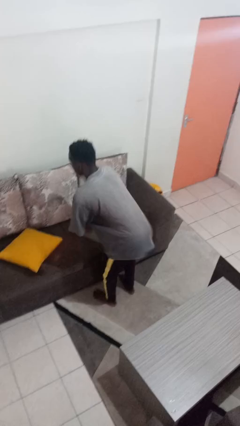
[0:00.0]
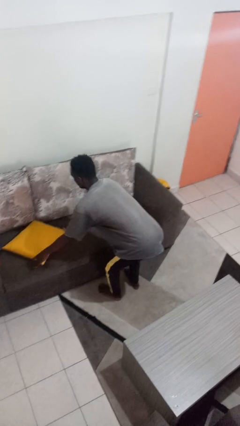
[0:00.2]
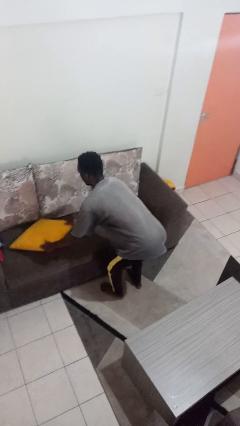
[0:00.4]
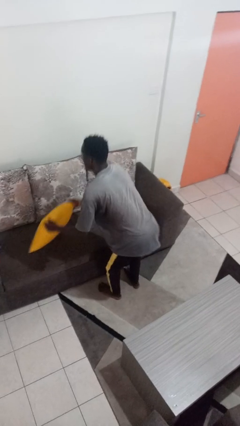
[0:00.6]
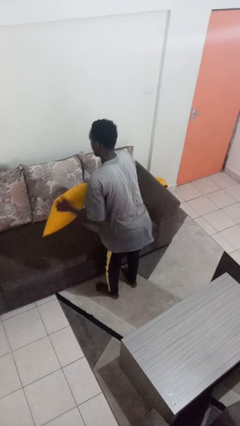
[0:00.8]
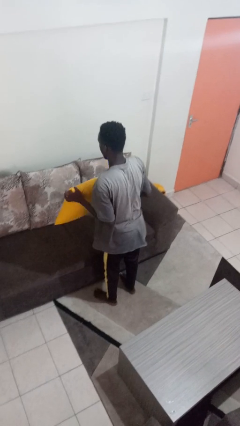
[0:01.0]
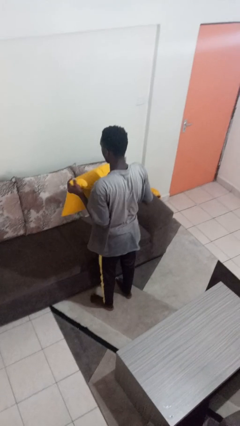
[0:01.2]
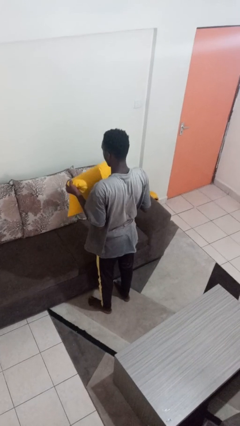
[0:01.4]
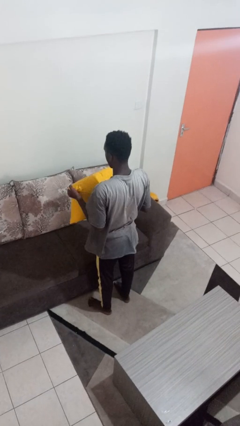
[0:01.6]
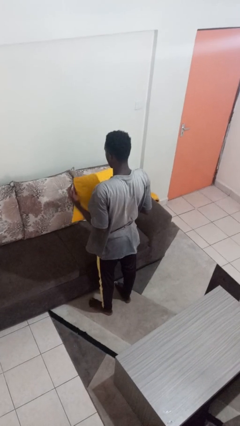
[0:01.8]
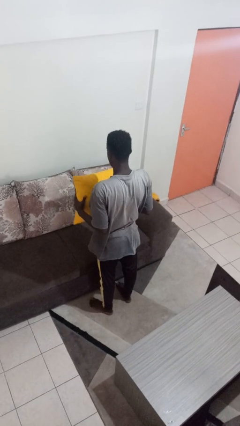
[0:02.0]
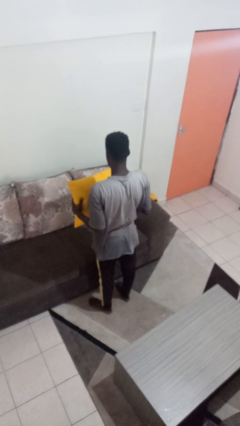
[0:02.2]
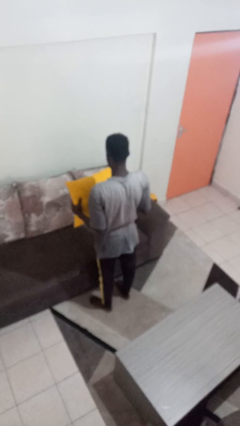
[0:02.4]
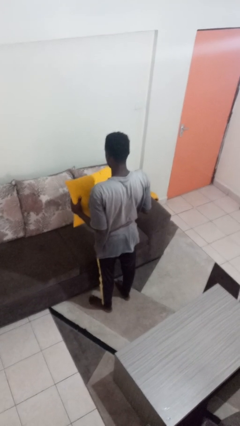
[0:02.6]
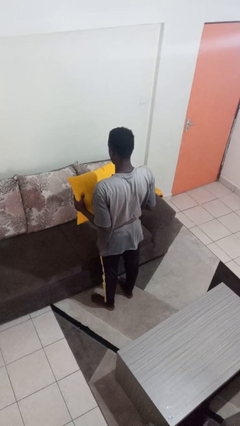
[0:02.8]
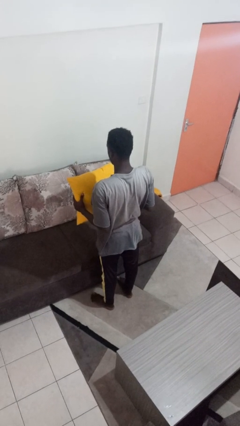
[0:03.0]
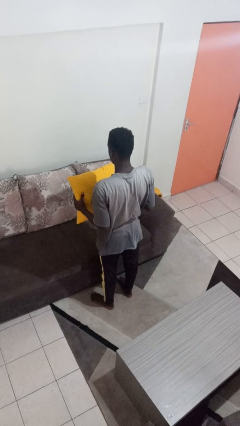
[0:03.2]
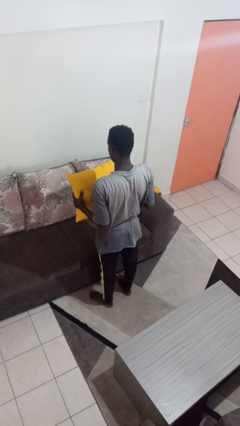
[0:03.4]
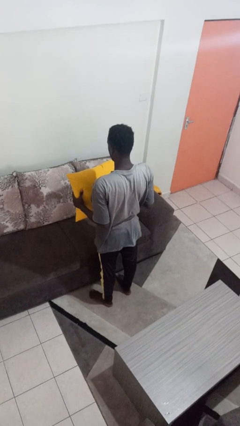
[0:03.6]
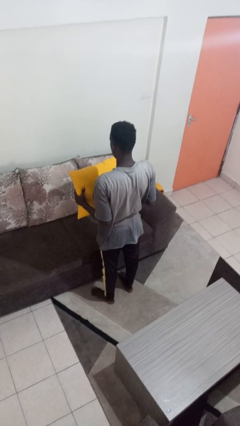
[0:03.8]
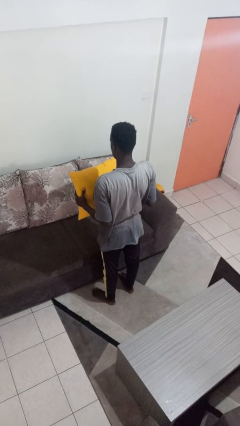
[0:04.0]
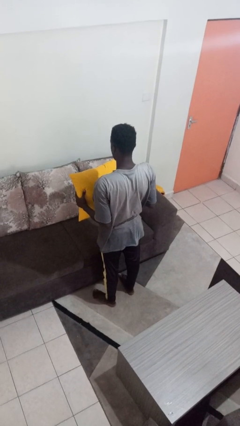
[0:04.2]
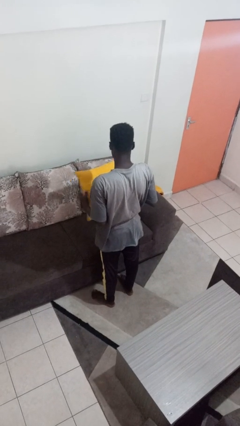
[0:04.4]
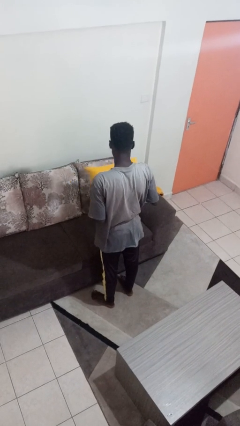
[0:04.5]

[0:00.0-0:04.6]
person picks up object from couch

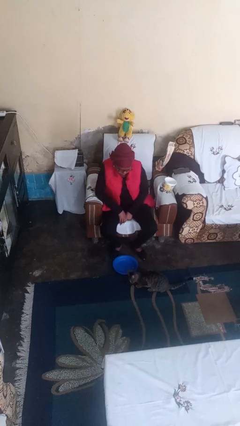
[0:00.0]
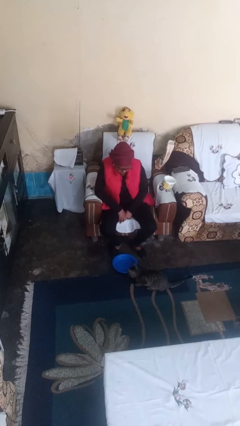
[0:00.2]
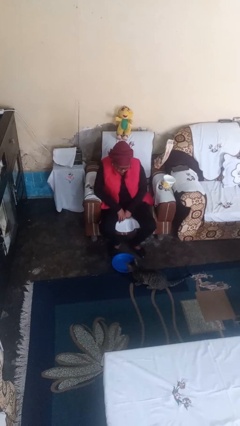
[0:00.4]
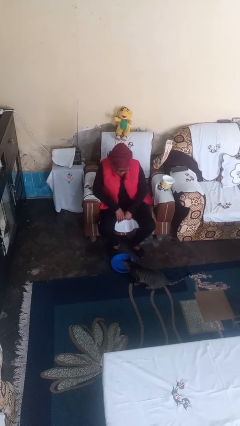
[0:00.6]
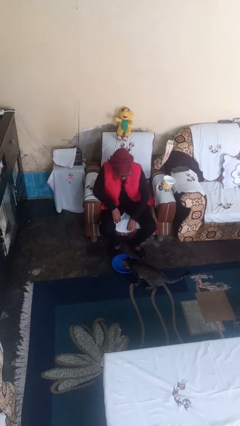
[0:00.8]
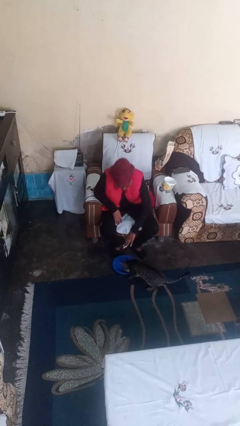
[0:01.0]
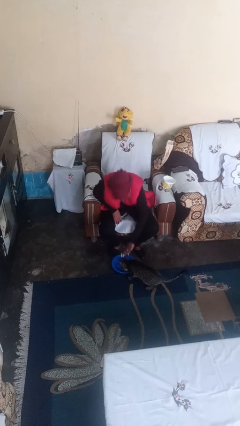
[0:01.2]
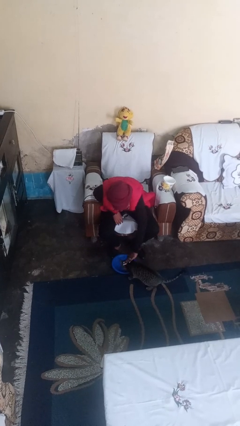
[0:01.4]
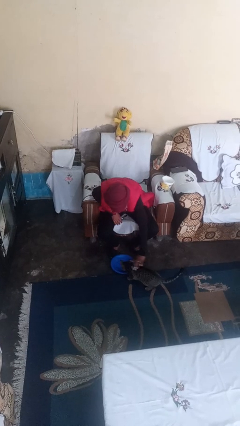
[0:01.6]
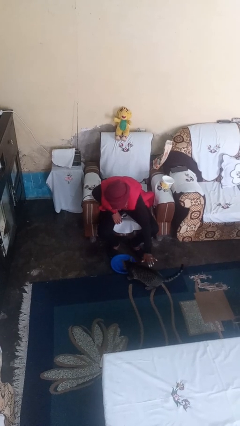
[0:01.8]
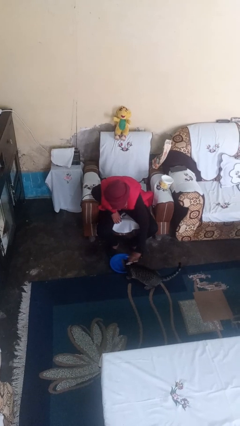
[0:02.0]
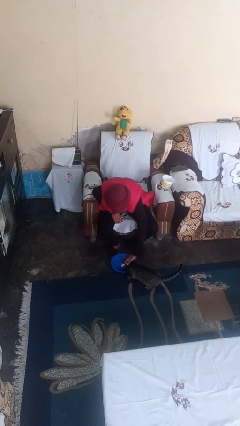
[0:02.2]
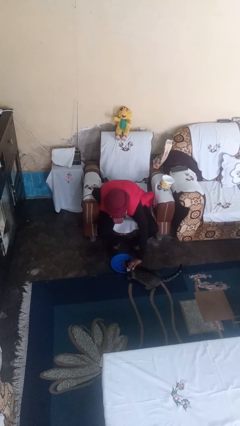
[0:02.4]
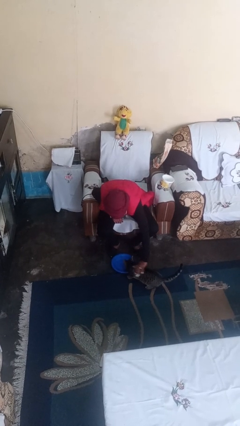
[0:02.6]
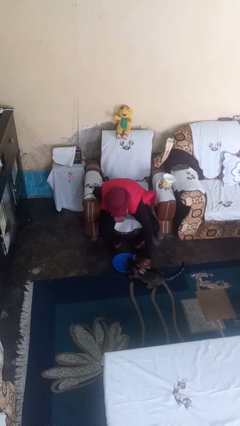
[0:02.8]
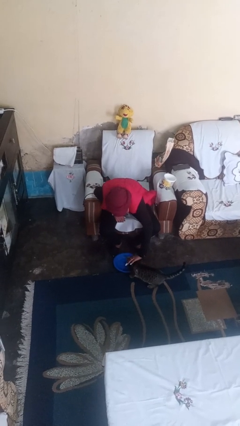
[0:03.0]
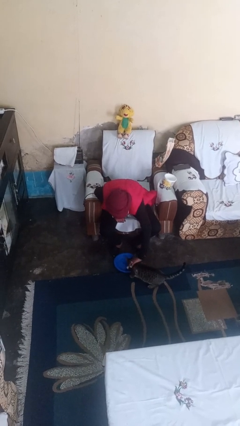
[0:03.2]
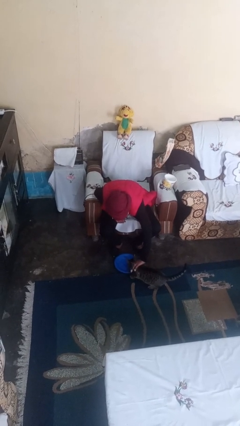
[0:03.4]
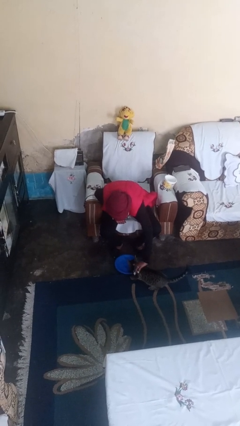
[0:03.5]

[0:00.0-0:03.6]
person pets cat

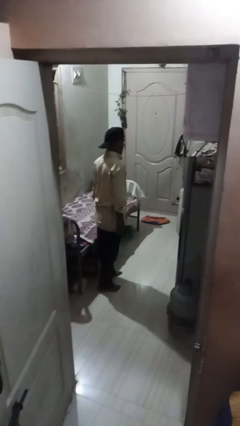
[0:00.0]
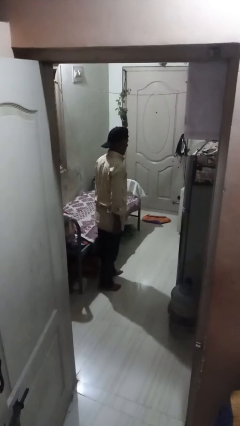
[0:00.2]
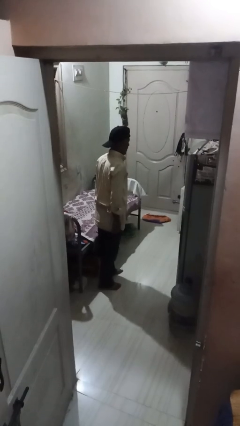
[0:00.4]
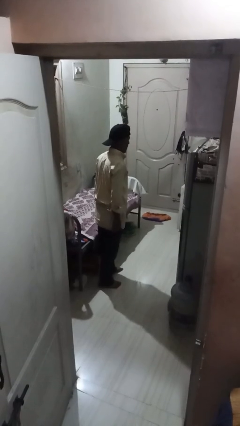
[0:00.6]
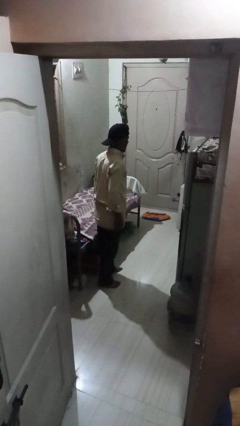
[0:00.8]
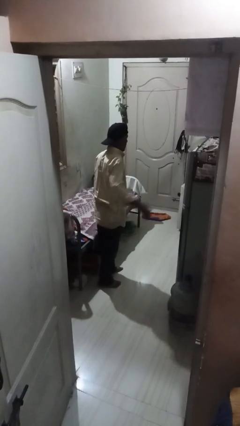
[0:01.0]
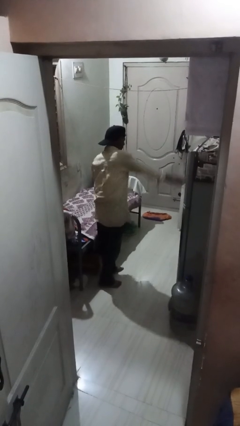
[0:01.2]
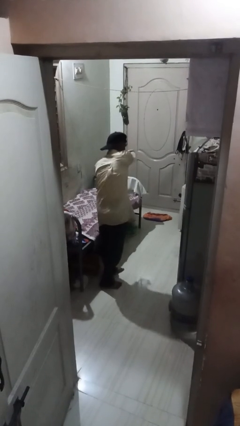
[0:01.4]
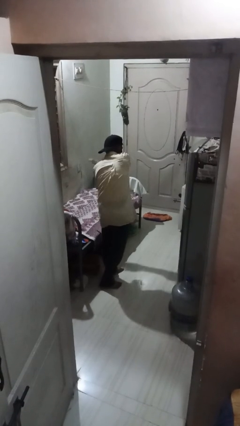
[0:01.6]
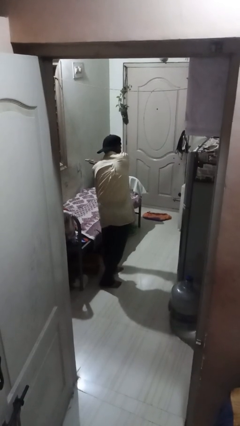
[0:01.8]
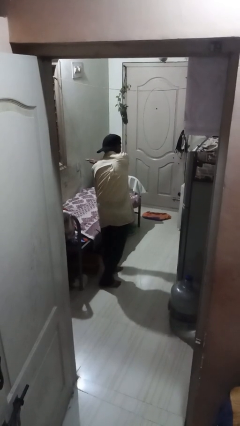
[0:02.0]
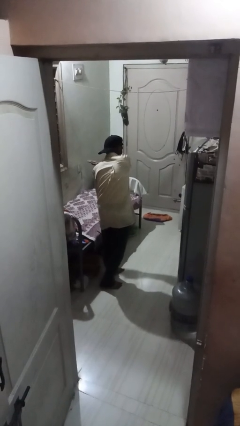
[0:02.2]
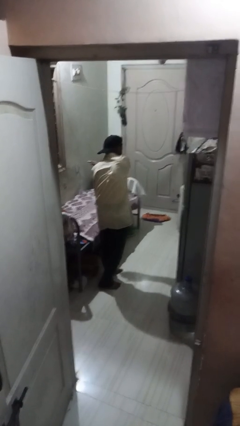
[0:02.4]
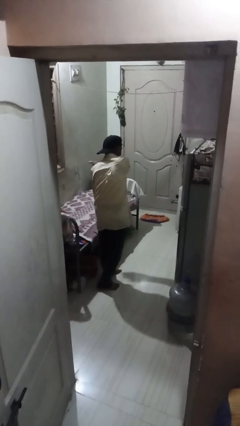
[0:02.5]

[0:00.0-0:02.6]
person karate chop

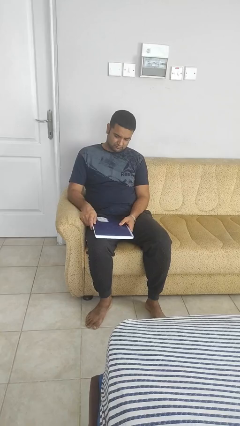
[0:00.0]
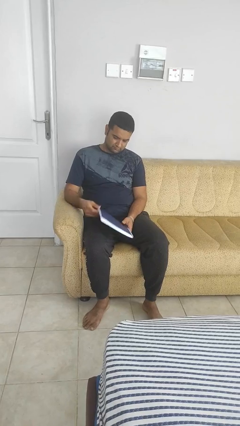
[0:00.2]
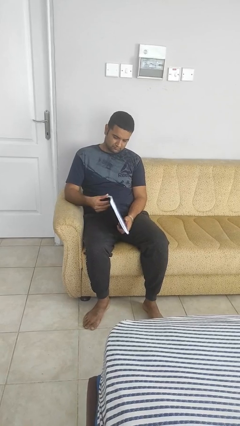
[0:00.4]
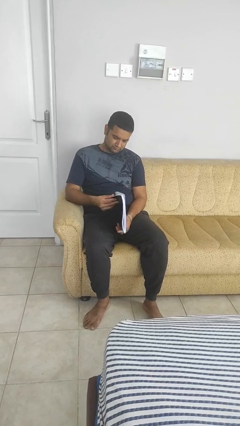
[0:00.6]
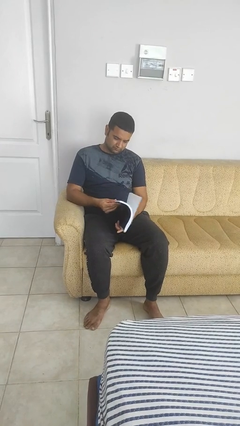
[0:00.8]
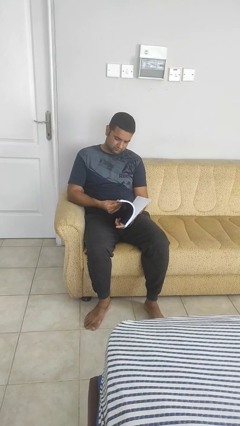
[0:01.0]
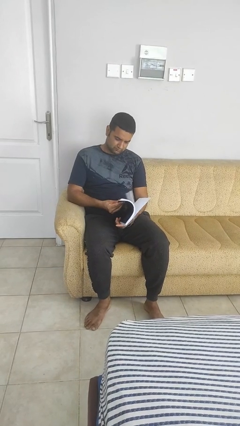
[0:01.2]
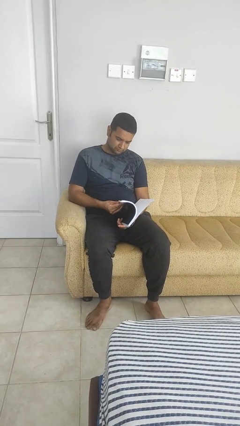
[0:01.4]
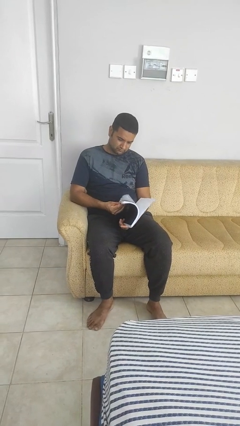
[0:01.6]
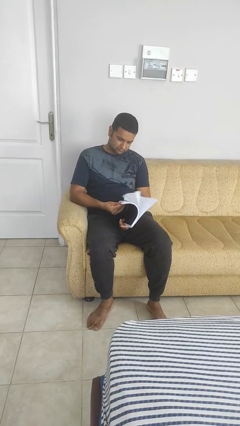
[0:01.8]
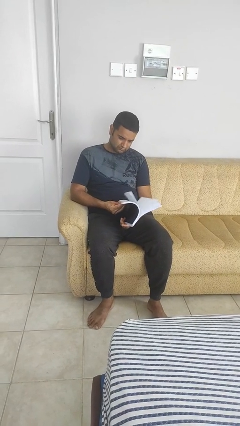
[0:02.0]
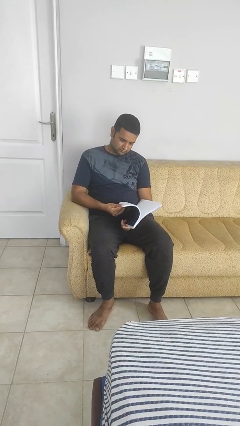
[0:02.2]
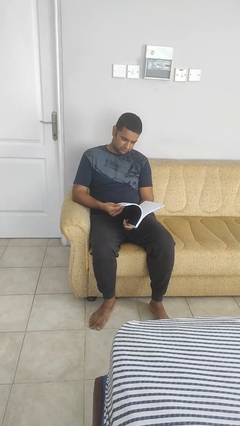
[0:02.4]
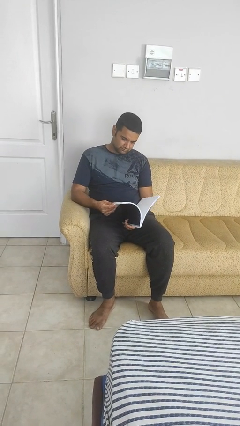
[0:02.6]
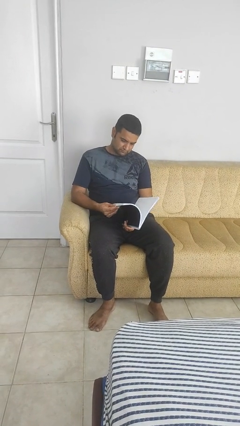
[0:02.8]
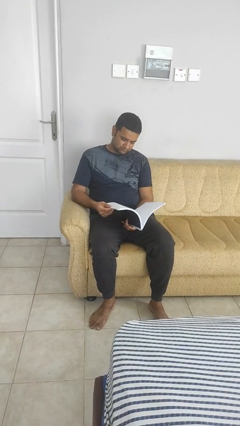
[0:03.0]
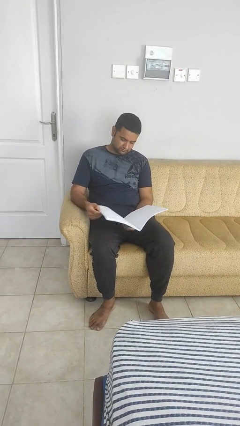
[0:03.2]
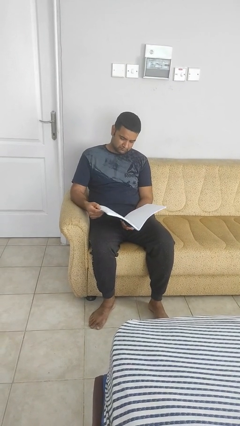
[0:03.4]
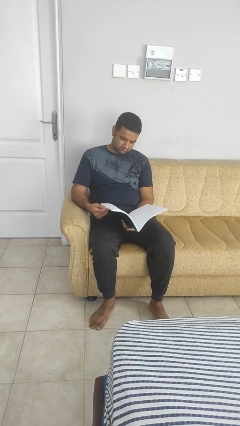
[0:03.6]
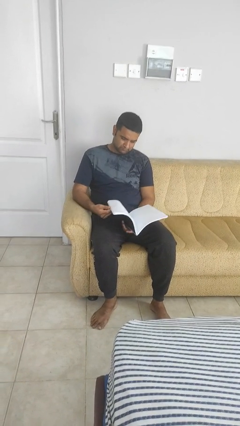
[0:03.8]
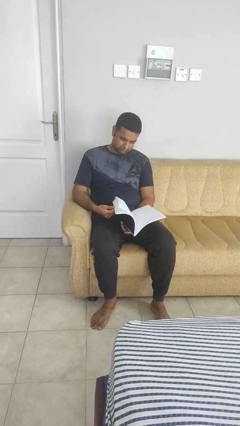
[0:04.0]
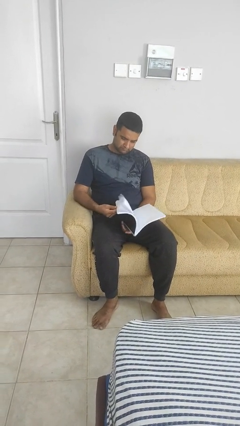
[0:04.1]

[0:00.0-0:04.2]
person reads book

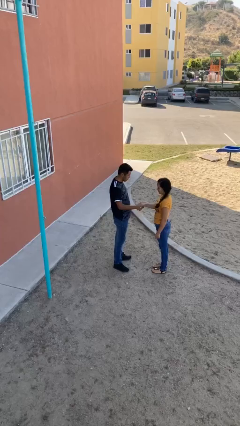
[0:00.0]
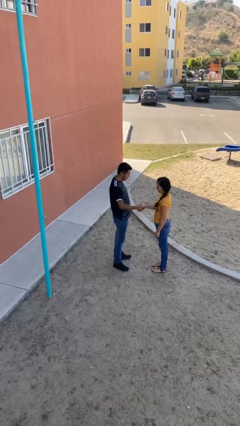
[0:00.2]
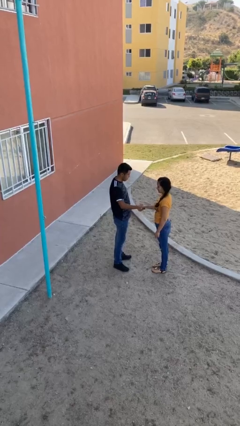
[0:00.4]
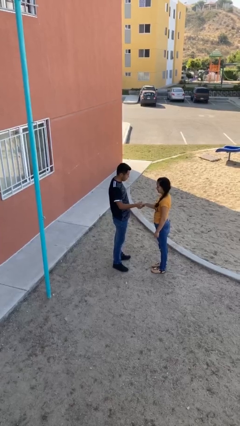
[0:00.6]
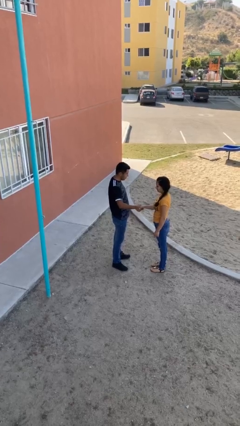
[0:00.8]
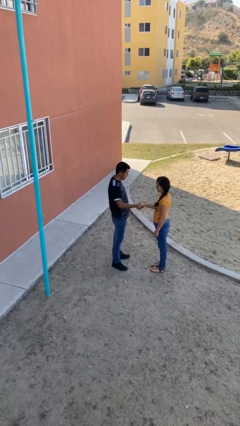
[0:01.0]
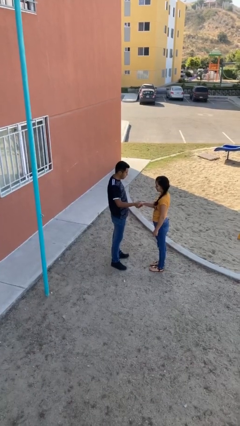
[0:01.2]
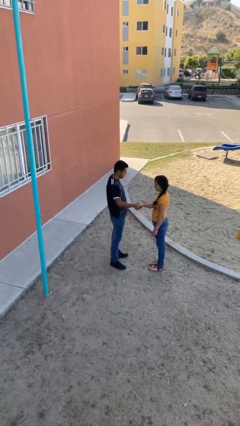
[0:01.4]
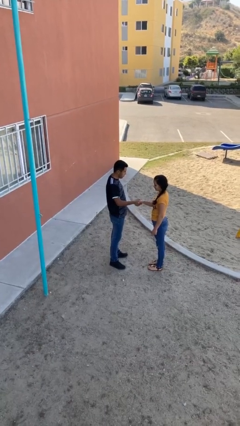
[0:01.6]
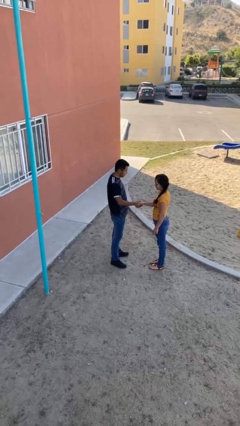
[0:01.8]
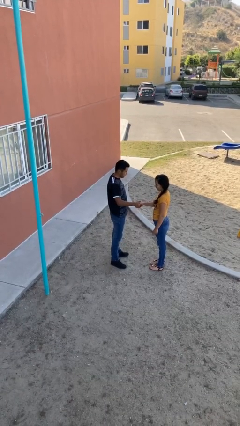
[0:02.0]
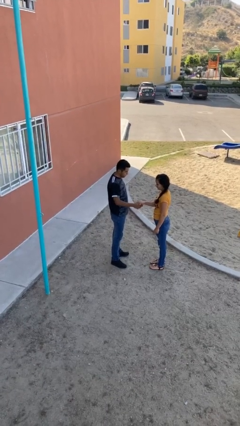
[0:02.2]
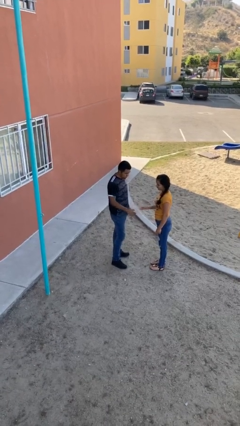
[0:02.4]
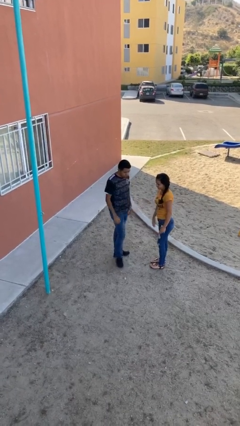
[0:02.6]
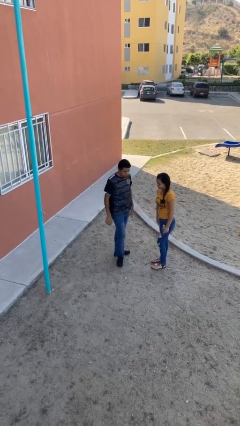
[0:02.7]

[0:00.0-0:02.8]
person shakes hand
